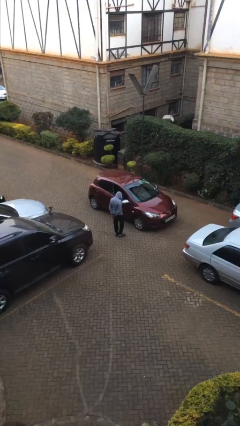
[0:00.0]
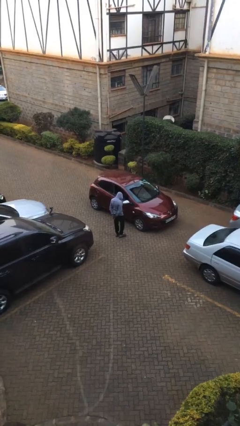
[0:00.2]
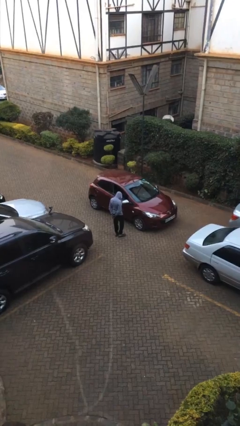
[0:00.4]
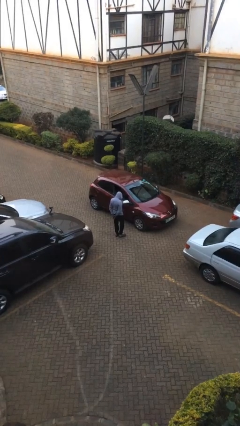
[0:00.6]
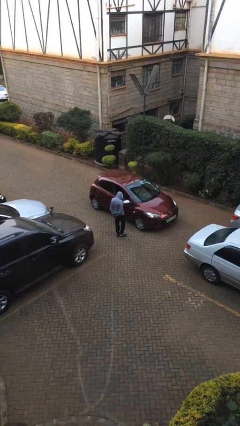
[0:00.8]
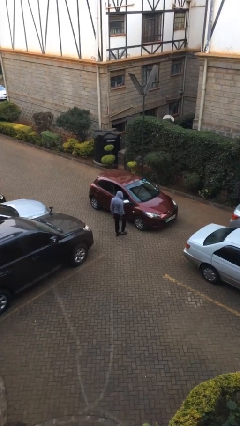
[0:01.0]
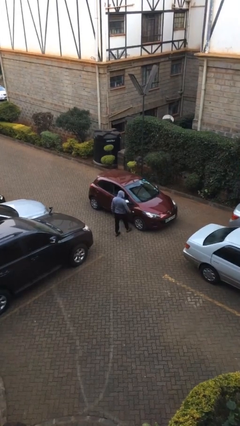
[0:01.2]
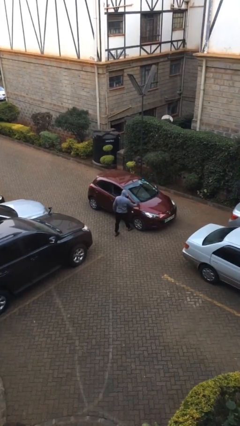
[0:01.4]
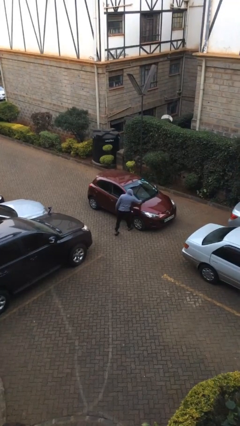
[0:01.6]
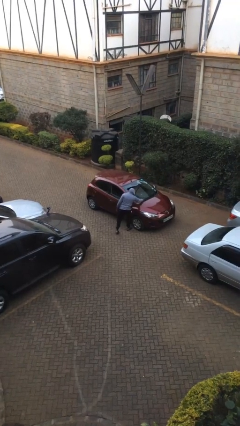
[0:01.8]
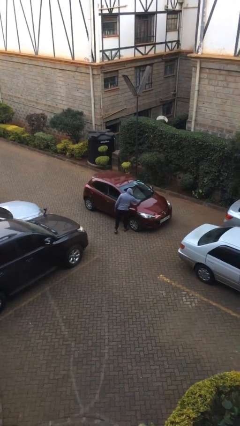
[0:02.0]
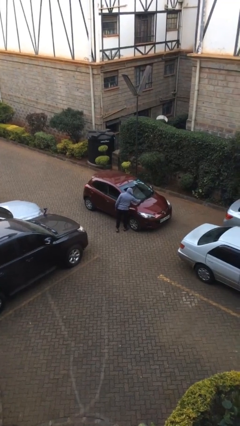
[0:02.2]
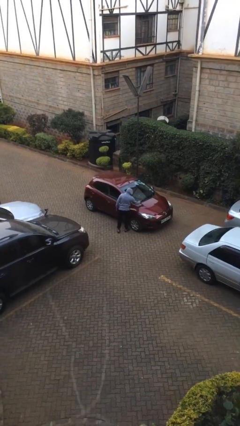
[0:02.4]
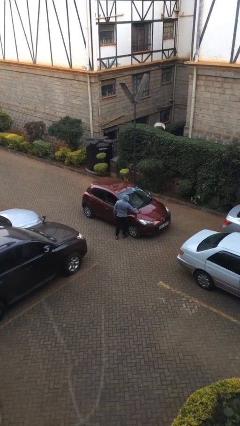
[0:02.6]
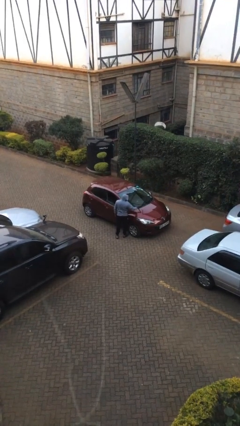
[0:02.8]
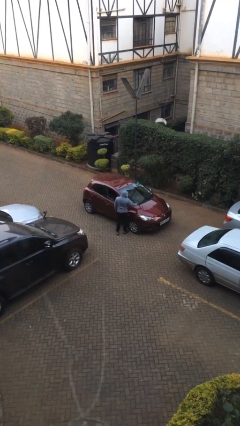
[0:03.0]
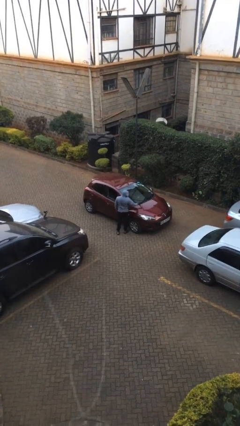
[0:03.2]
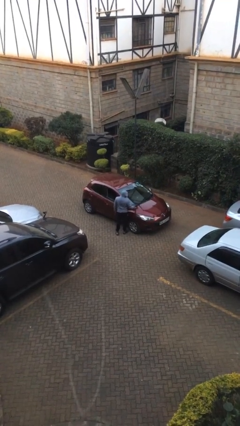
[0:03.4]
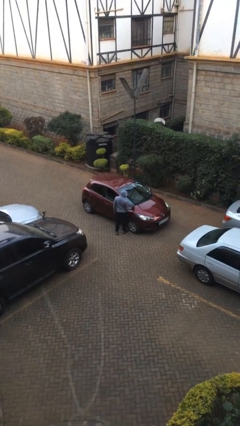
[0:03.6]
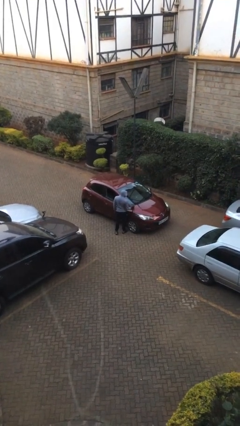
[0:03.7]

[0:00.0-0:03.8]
person flips up car wipers

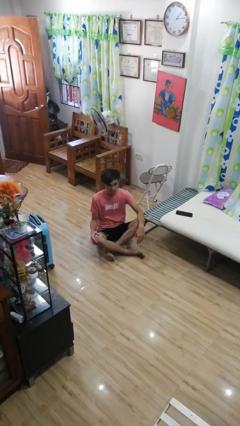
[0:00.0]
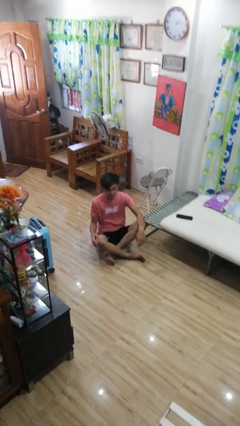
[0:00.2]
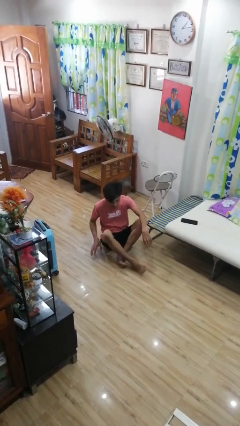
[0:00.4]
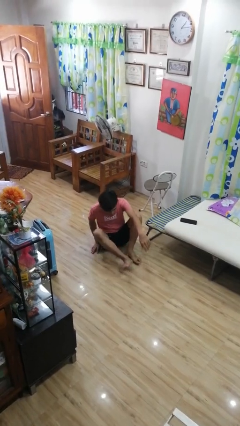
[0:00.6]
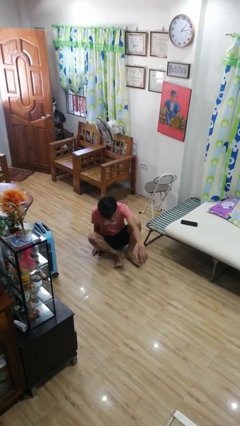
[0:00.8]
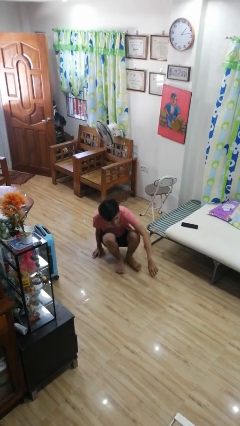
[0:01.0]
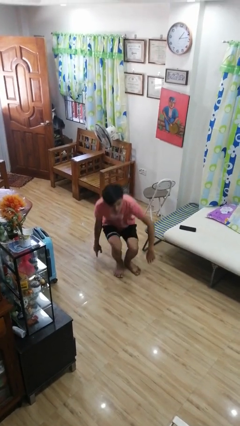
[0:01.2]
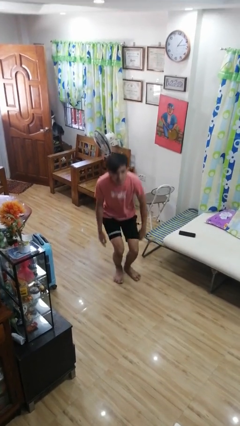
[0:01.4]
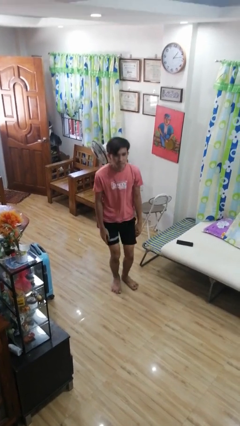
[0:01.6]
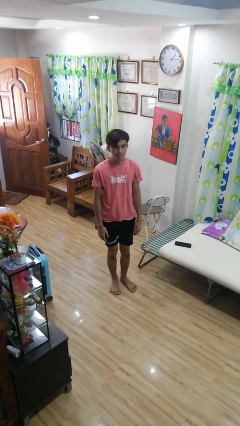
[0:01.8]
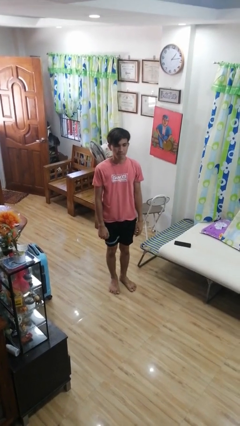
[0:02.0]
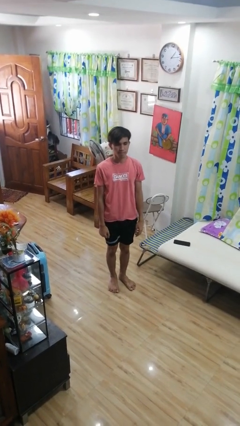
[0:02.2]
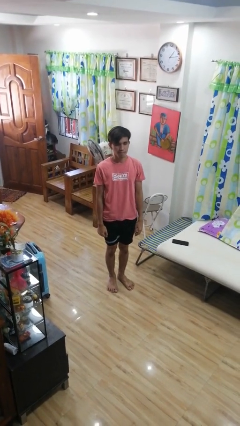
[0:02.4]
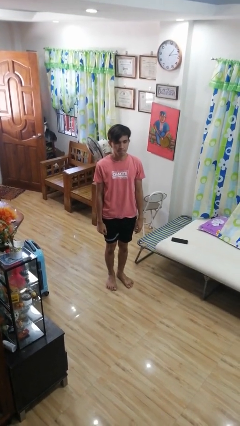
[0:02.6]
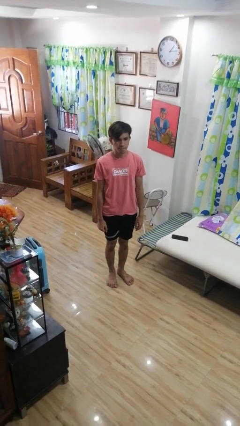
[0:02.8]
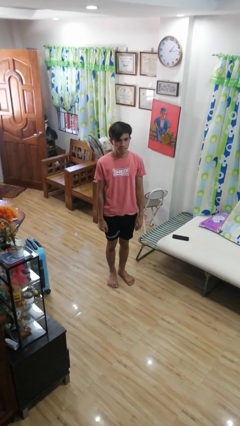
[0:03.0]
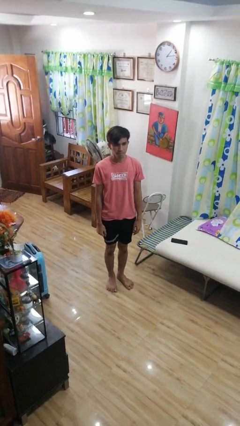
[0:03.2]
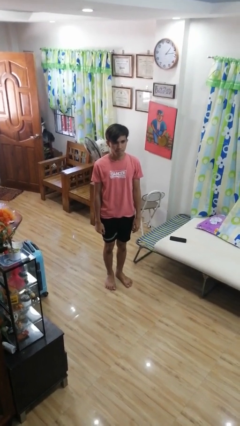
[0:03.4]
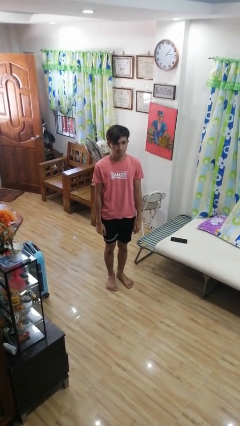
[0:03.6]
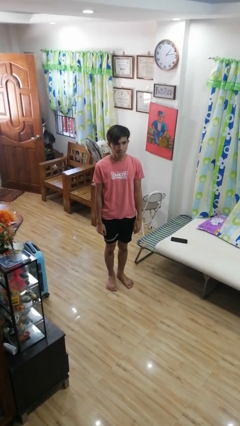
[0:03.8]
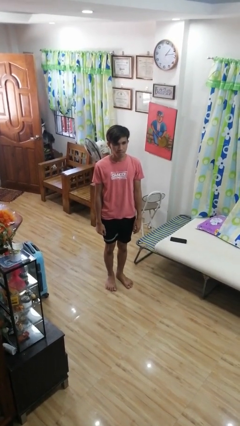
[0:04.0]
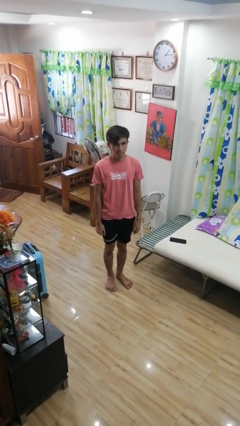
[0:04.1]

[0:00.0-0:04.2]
person stands up from floor

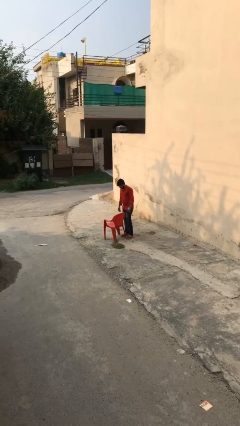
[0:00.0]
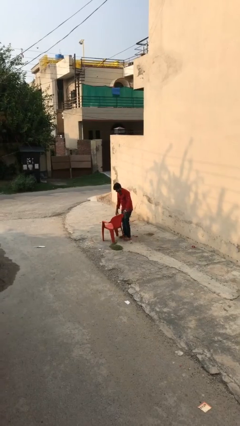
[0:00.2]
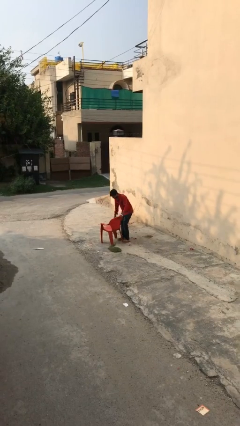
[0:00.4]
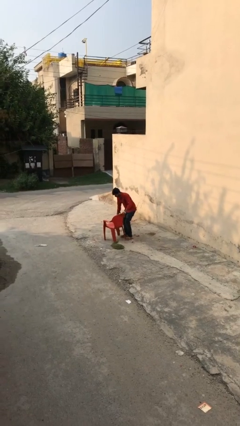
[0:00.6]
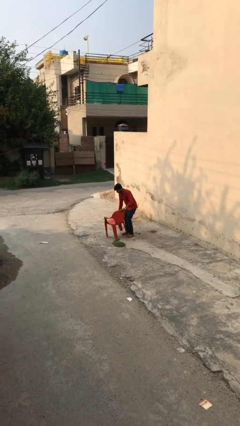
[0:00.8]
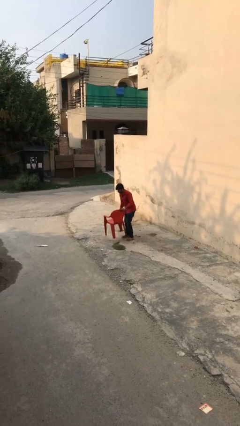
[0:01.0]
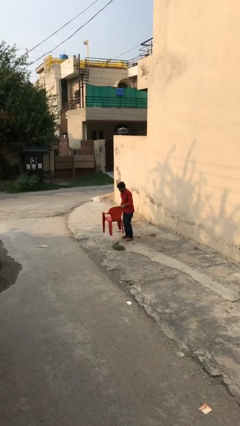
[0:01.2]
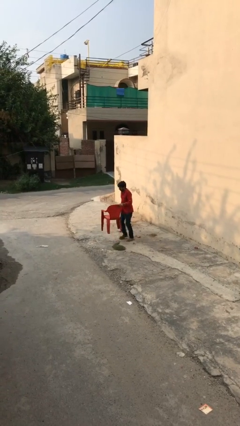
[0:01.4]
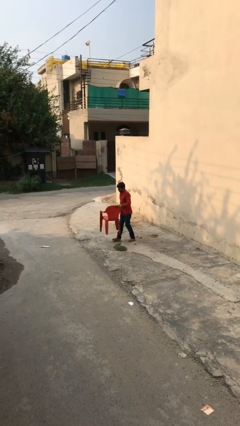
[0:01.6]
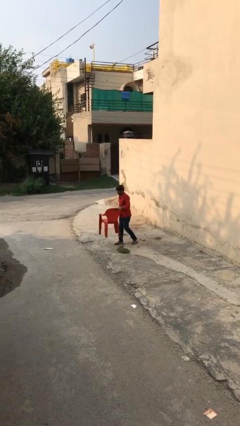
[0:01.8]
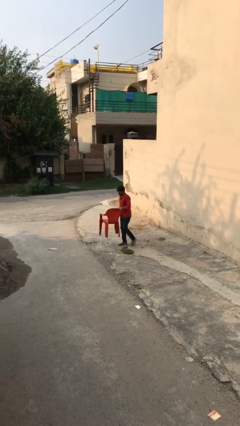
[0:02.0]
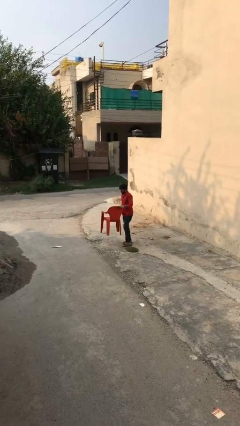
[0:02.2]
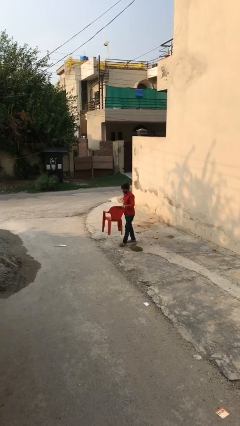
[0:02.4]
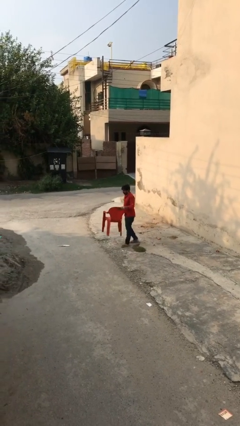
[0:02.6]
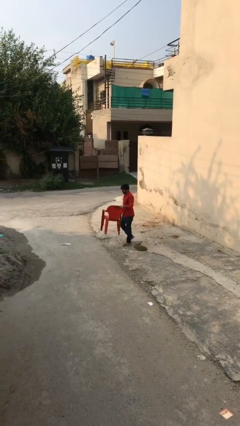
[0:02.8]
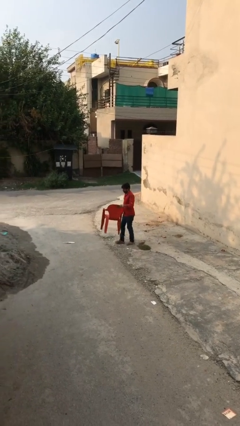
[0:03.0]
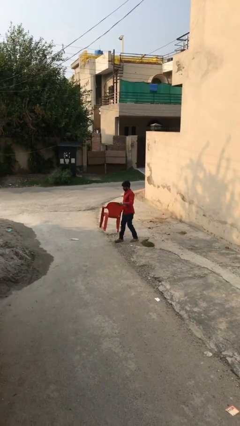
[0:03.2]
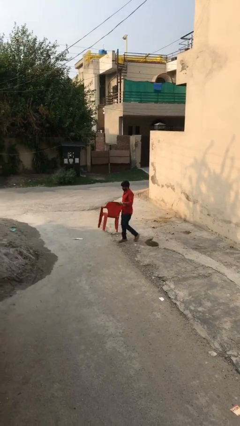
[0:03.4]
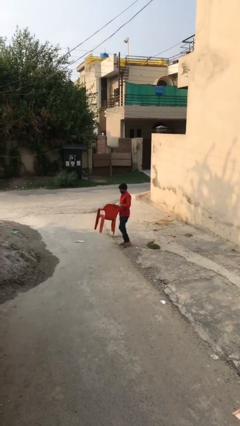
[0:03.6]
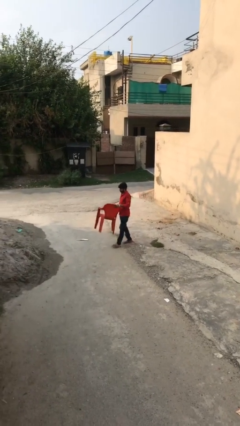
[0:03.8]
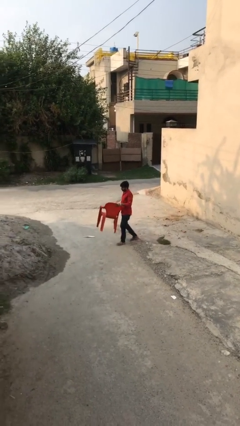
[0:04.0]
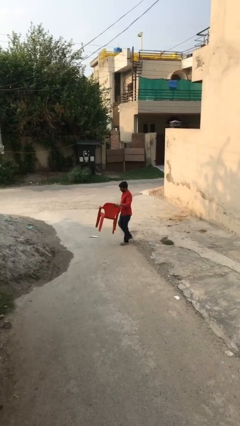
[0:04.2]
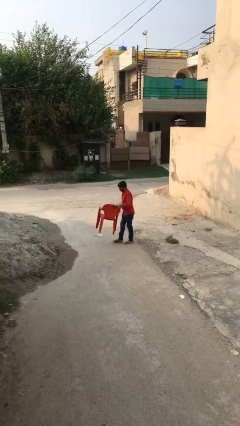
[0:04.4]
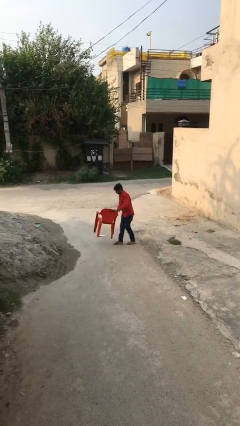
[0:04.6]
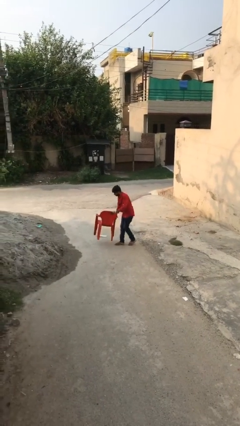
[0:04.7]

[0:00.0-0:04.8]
person carries heavy object

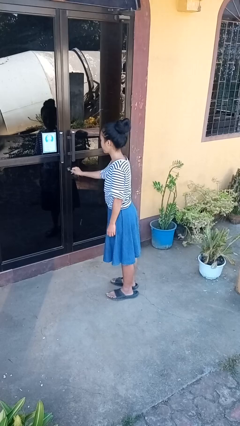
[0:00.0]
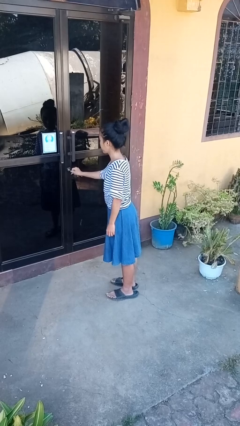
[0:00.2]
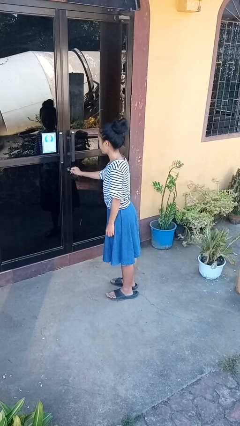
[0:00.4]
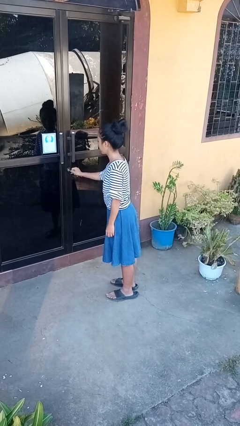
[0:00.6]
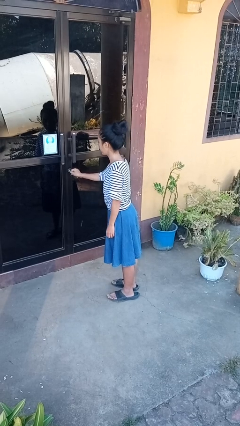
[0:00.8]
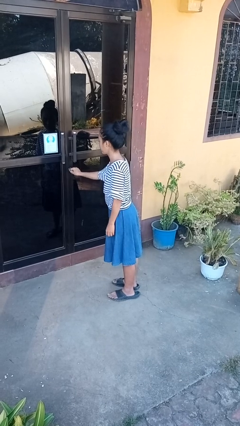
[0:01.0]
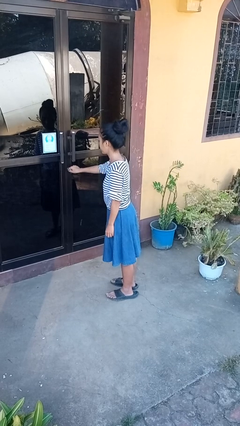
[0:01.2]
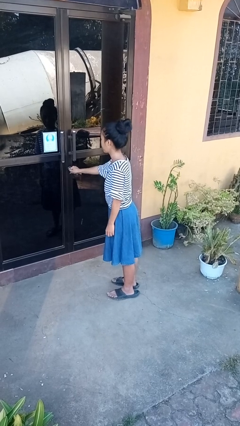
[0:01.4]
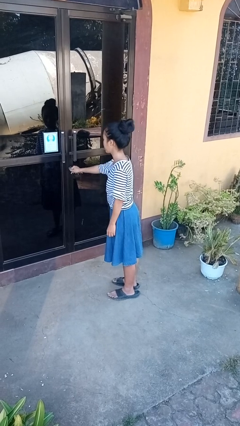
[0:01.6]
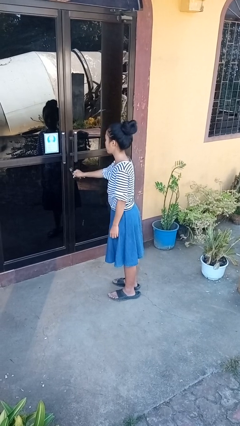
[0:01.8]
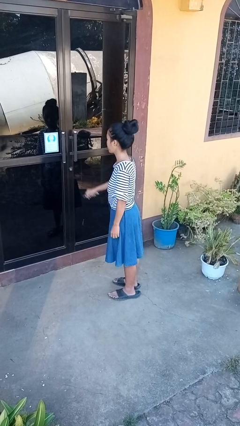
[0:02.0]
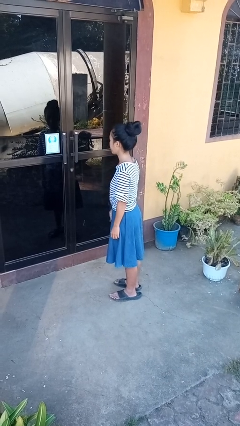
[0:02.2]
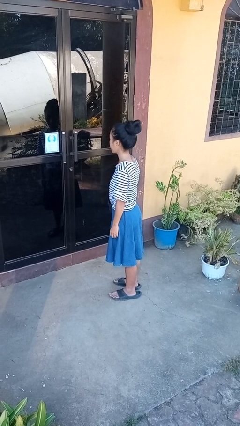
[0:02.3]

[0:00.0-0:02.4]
person locks door with keys

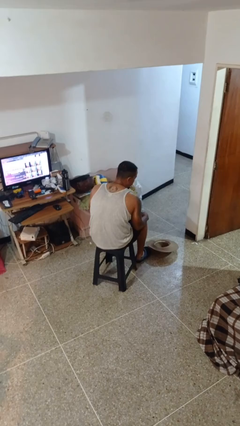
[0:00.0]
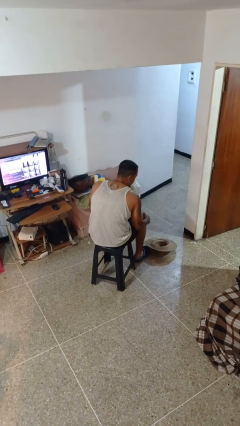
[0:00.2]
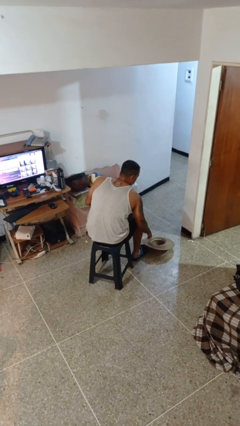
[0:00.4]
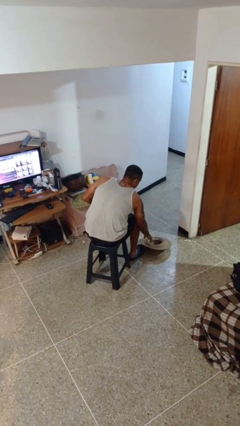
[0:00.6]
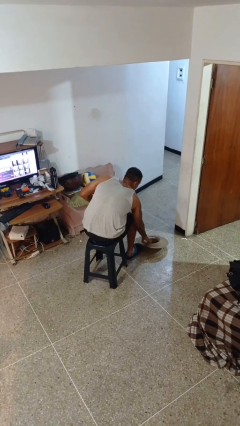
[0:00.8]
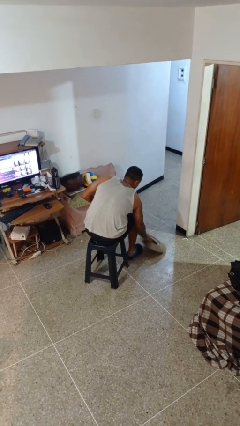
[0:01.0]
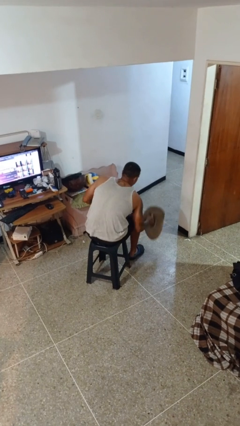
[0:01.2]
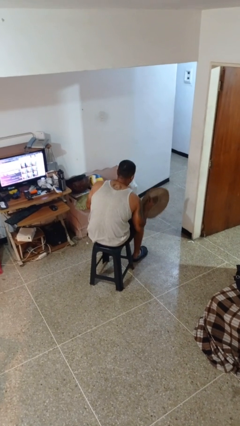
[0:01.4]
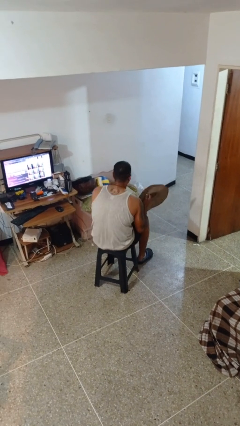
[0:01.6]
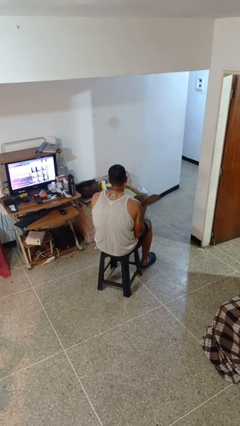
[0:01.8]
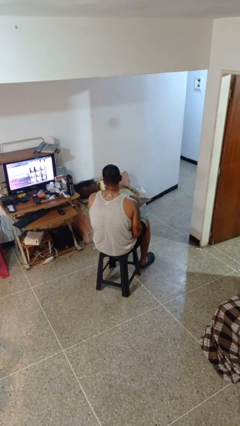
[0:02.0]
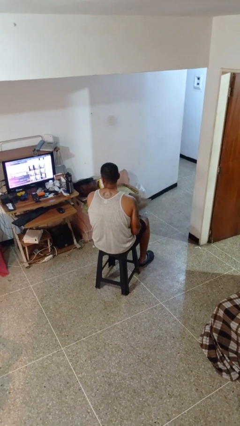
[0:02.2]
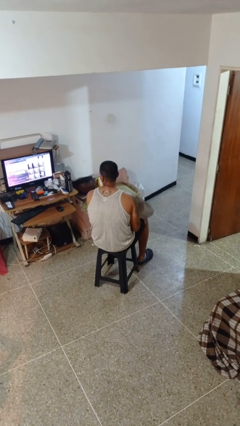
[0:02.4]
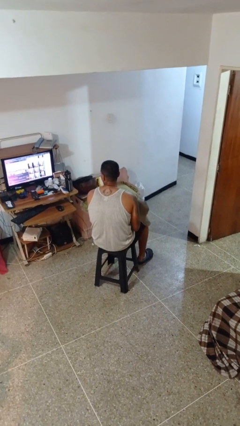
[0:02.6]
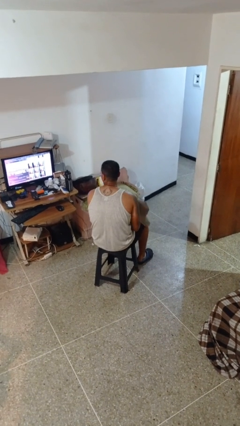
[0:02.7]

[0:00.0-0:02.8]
person picks up object from floor
